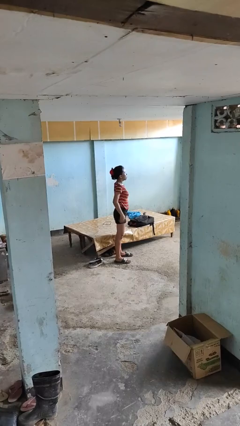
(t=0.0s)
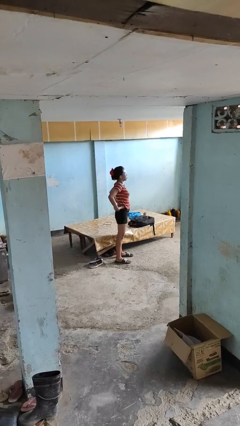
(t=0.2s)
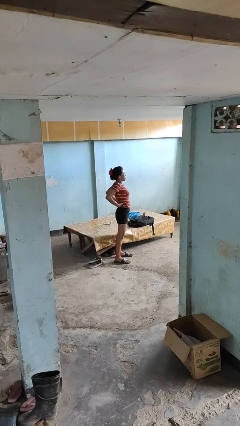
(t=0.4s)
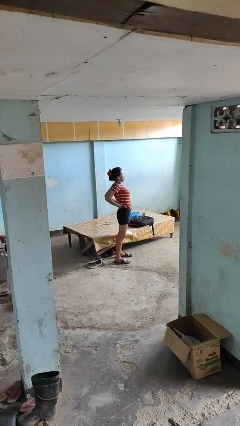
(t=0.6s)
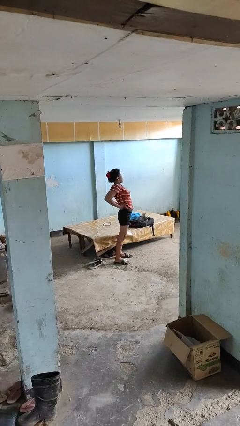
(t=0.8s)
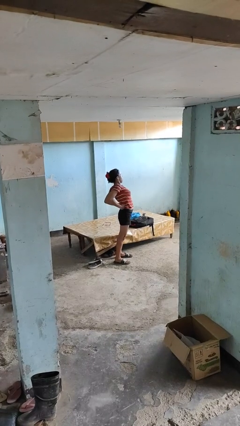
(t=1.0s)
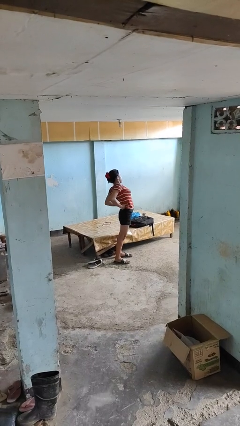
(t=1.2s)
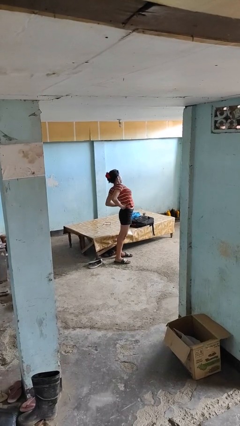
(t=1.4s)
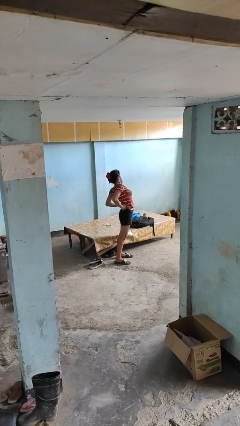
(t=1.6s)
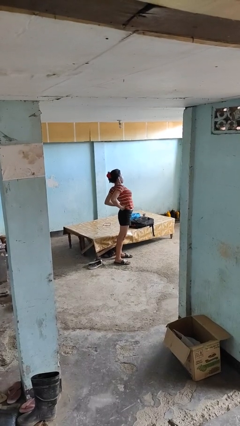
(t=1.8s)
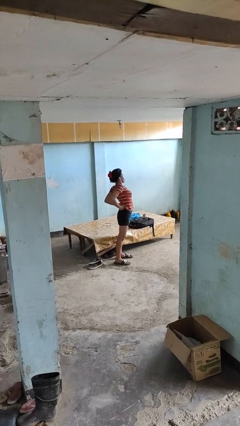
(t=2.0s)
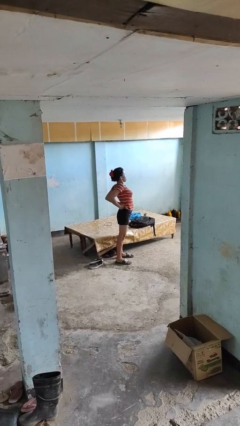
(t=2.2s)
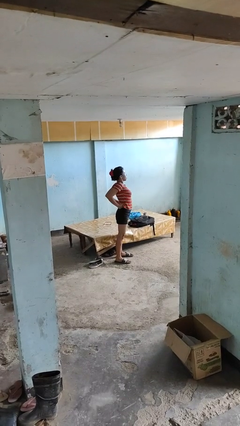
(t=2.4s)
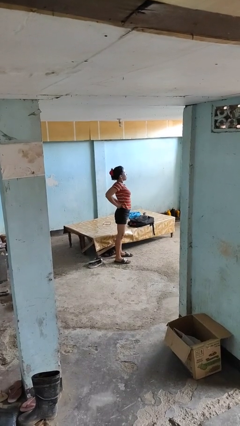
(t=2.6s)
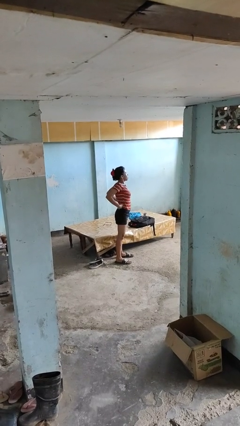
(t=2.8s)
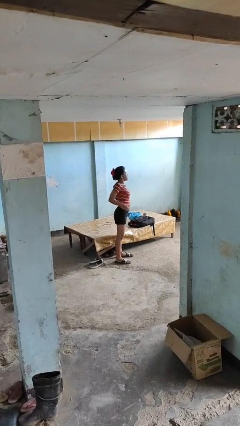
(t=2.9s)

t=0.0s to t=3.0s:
person stretches back

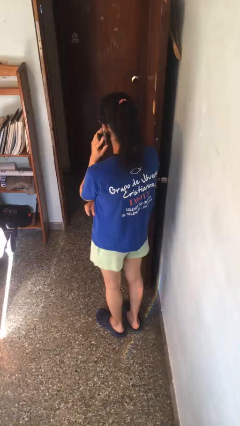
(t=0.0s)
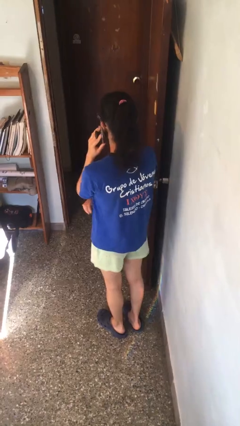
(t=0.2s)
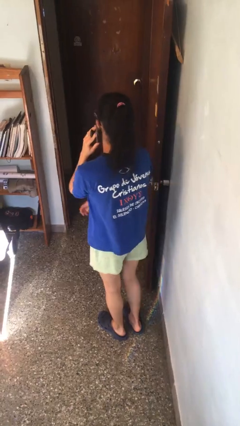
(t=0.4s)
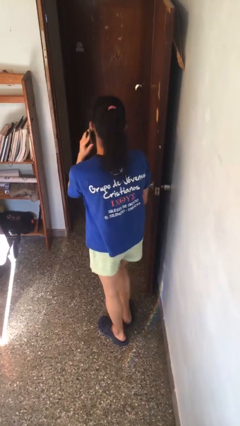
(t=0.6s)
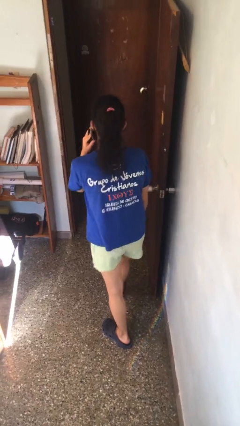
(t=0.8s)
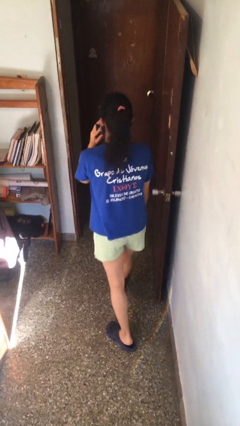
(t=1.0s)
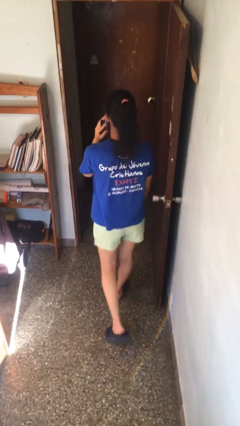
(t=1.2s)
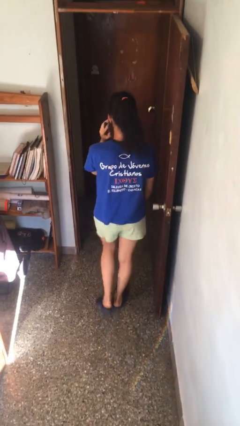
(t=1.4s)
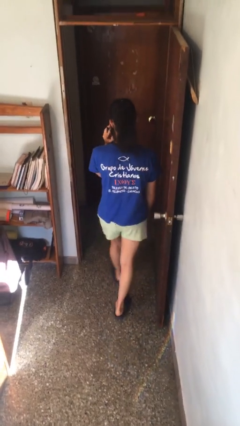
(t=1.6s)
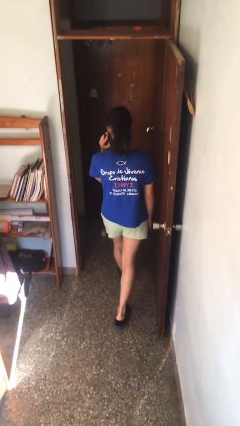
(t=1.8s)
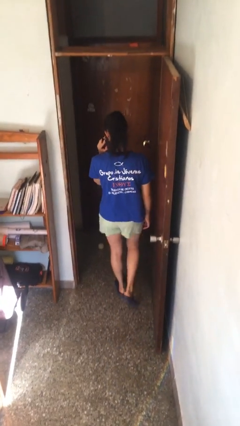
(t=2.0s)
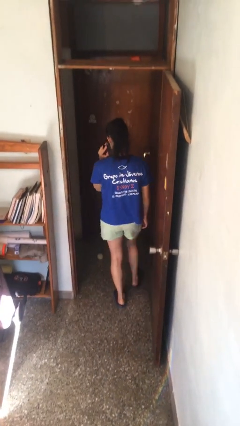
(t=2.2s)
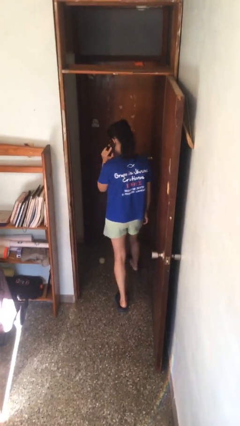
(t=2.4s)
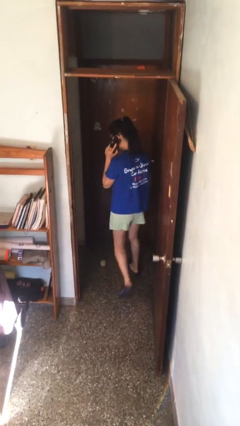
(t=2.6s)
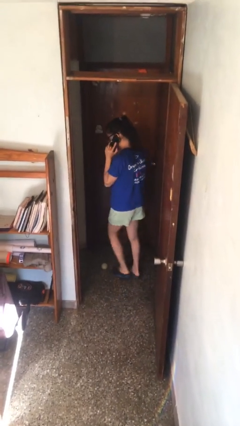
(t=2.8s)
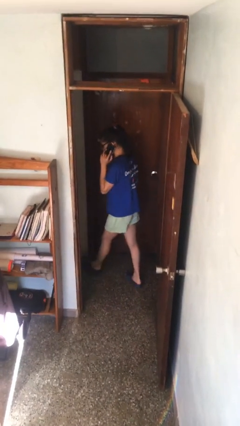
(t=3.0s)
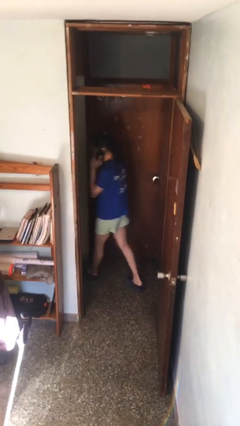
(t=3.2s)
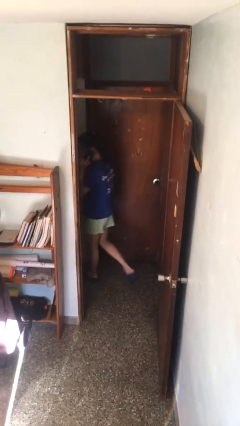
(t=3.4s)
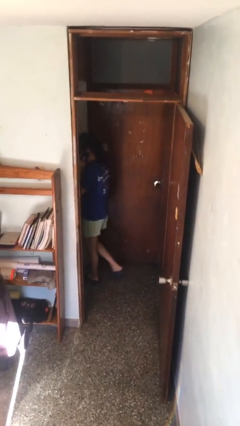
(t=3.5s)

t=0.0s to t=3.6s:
person exits scene through structure

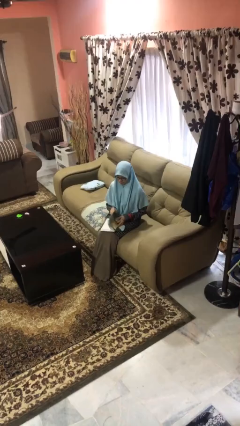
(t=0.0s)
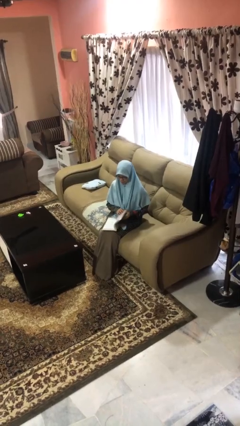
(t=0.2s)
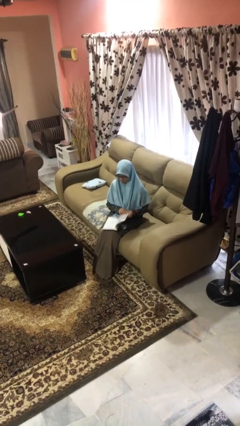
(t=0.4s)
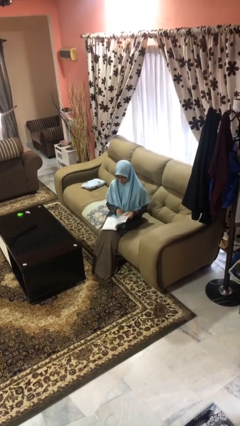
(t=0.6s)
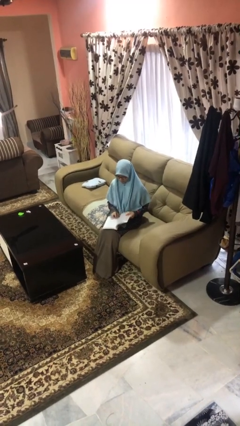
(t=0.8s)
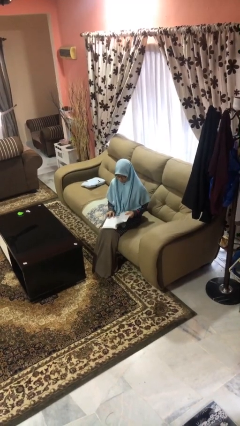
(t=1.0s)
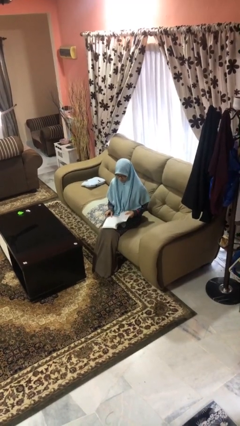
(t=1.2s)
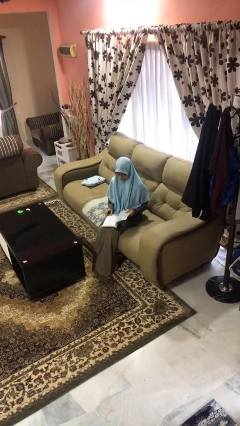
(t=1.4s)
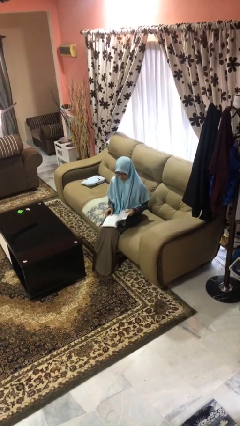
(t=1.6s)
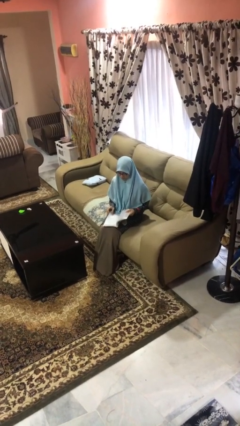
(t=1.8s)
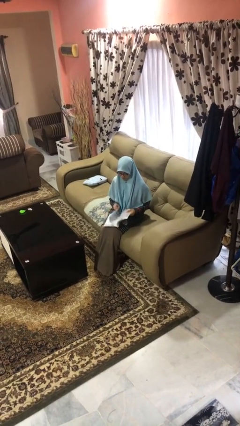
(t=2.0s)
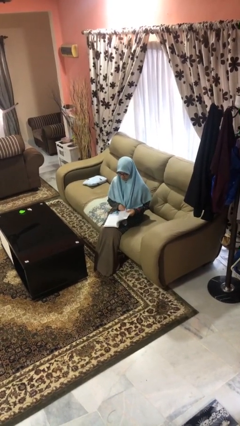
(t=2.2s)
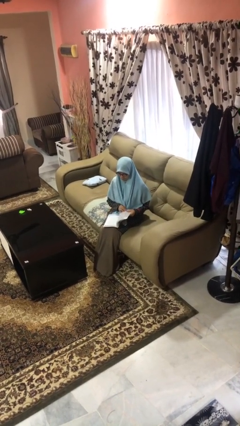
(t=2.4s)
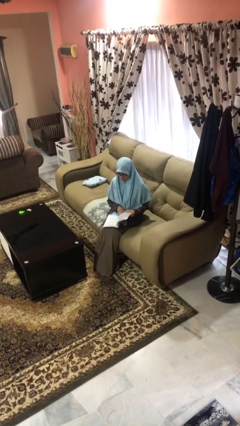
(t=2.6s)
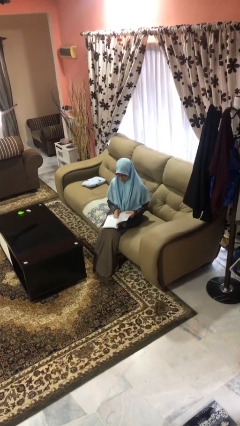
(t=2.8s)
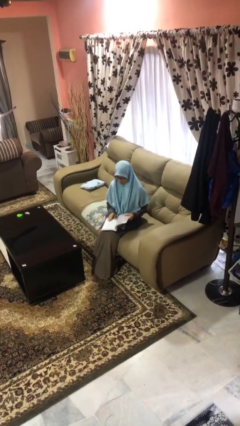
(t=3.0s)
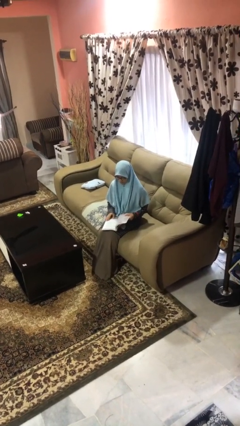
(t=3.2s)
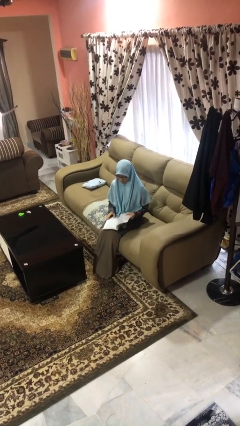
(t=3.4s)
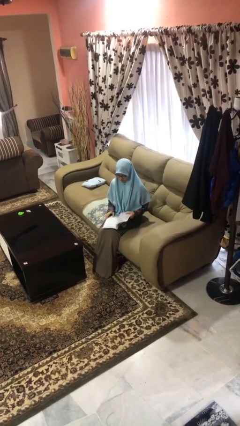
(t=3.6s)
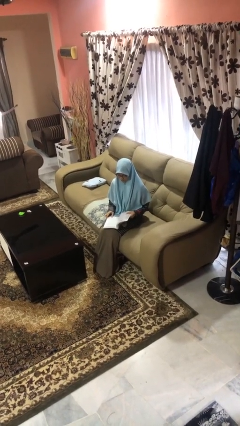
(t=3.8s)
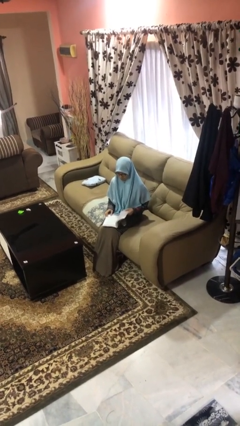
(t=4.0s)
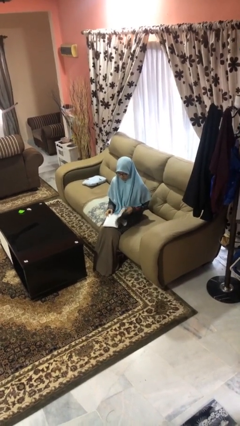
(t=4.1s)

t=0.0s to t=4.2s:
person reads magazine

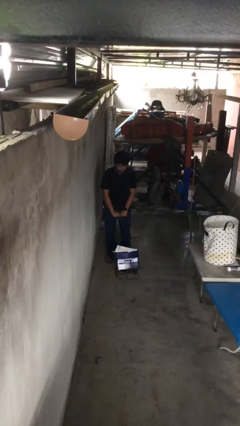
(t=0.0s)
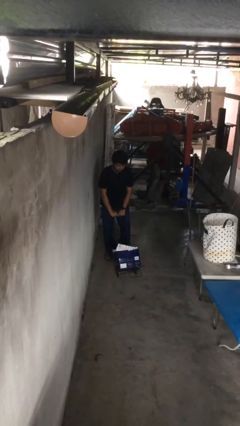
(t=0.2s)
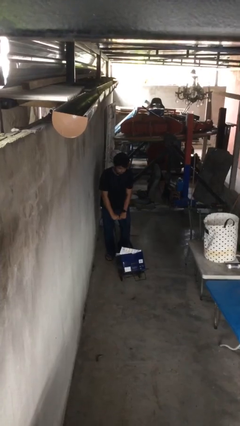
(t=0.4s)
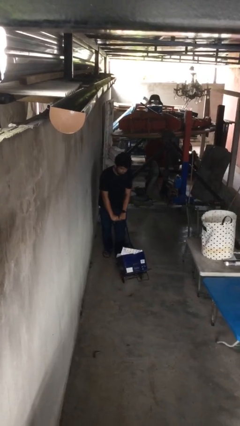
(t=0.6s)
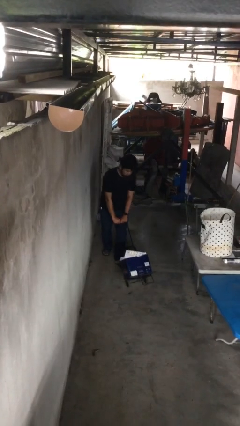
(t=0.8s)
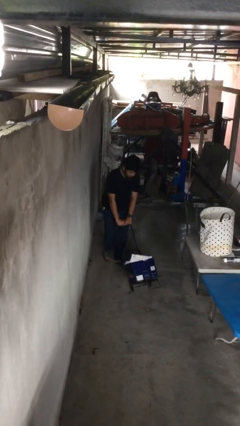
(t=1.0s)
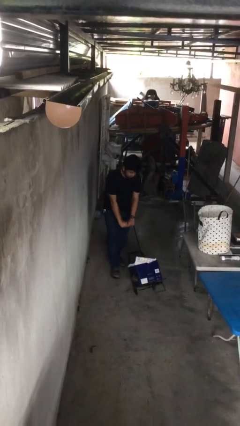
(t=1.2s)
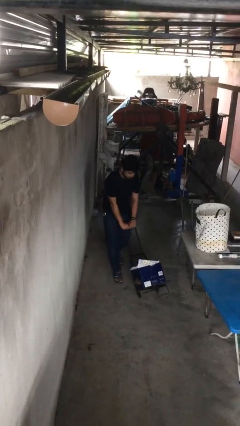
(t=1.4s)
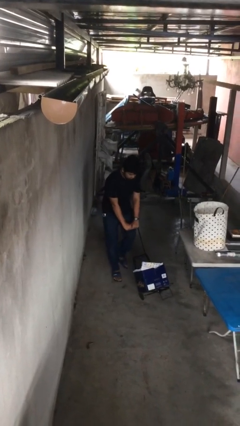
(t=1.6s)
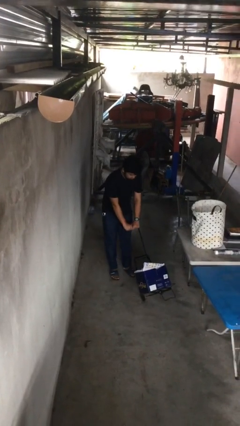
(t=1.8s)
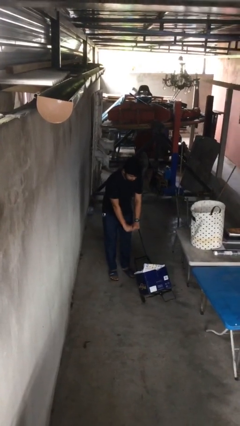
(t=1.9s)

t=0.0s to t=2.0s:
person pushes wheeled cart

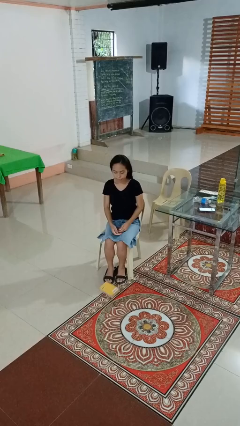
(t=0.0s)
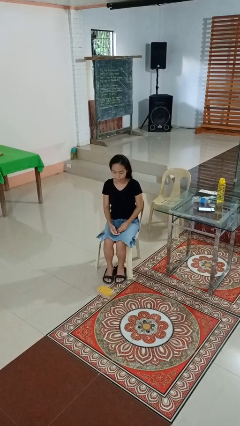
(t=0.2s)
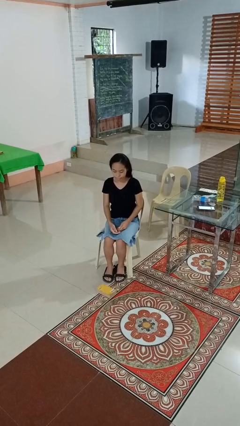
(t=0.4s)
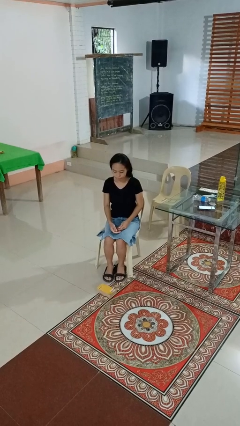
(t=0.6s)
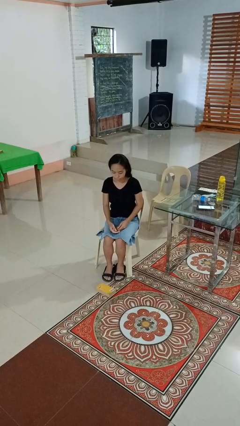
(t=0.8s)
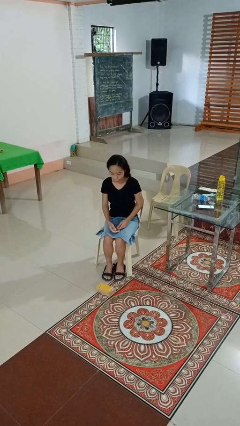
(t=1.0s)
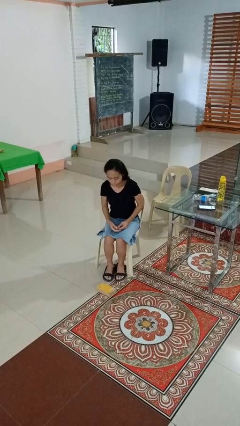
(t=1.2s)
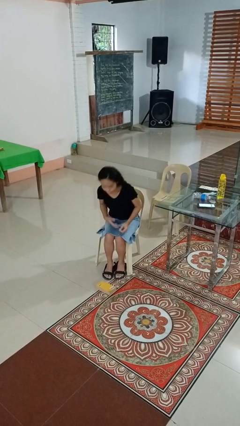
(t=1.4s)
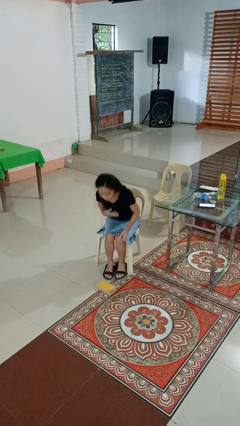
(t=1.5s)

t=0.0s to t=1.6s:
person drops object

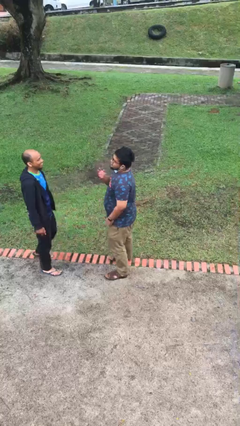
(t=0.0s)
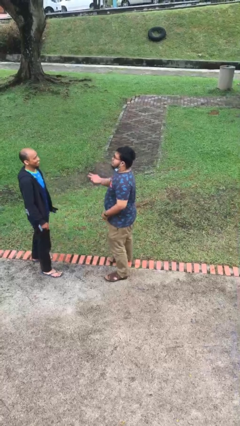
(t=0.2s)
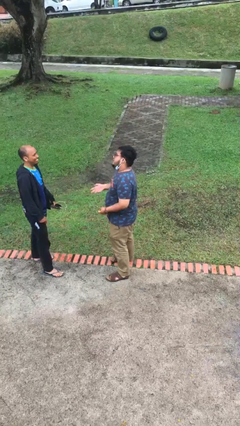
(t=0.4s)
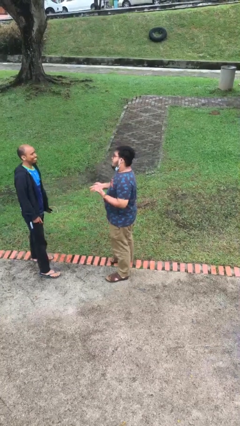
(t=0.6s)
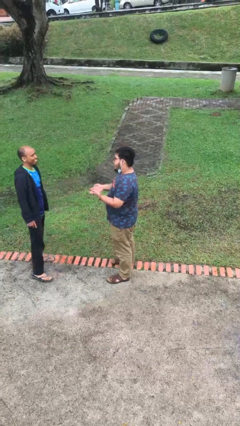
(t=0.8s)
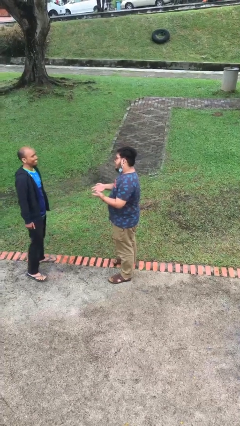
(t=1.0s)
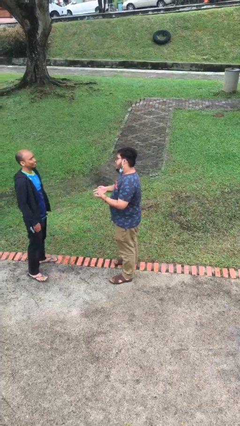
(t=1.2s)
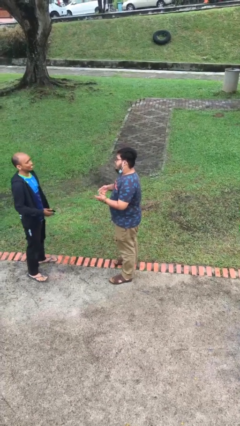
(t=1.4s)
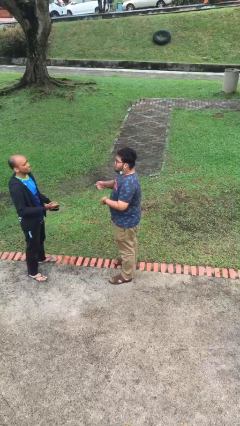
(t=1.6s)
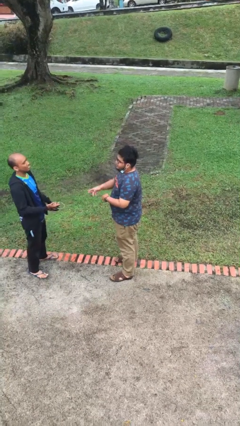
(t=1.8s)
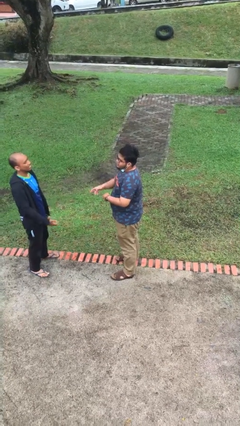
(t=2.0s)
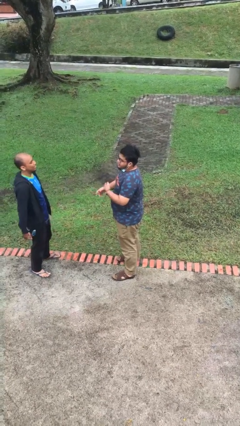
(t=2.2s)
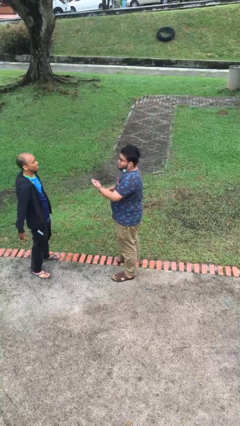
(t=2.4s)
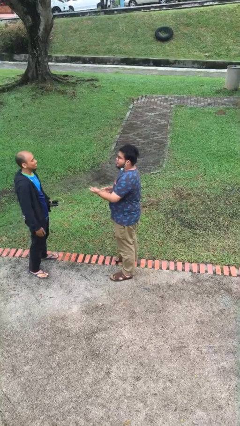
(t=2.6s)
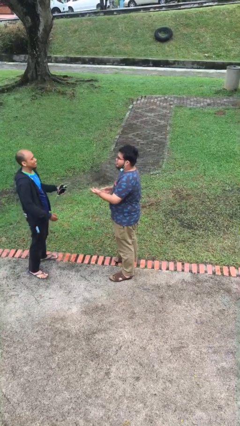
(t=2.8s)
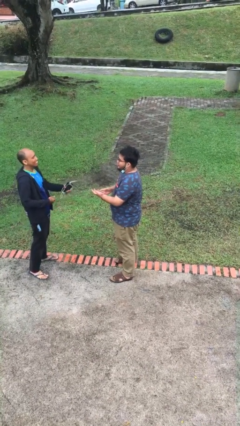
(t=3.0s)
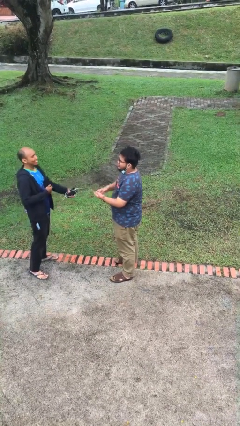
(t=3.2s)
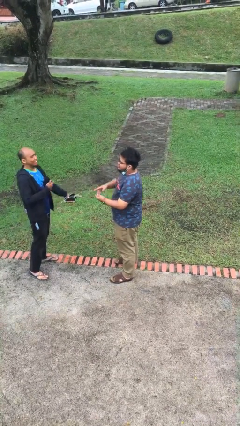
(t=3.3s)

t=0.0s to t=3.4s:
person talks to person
